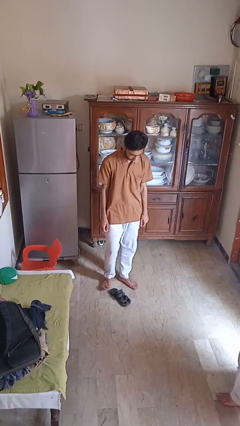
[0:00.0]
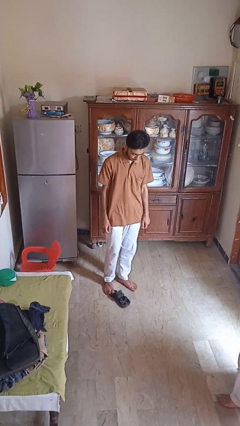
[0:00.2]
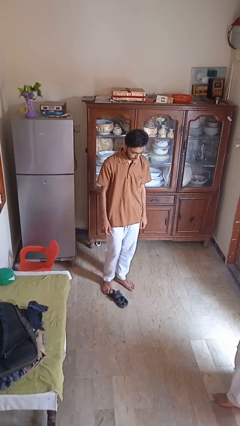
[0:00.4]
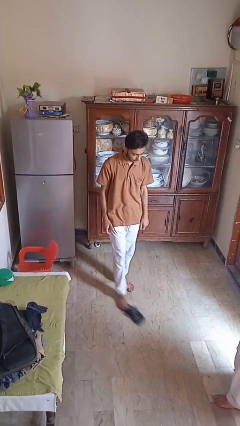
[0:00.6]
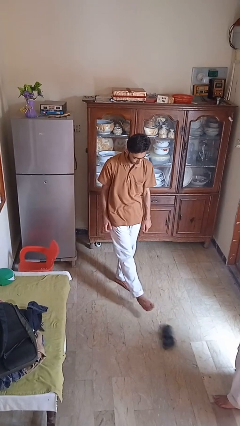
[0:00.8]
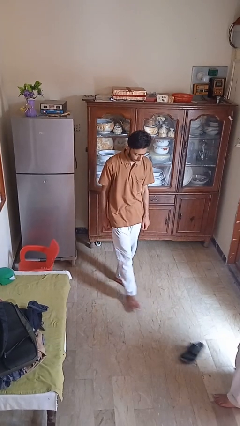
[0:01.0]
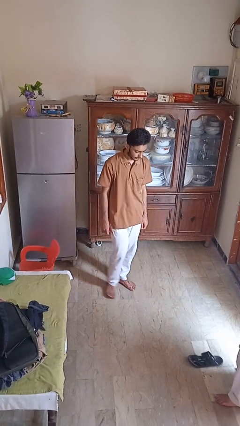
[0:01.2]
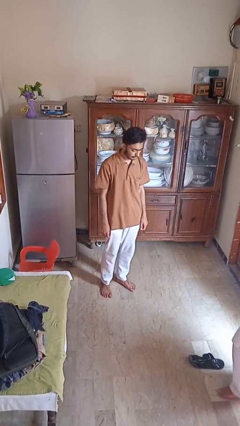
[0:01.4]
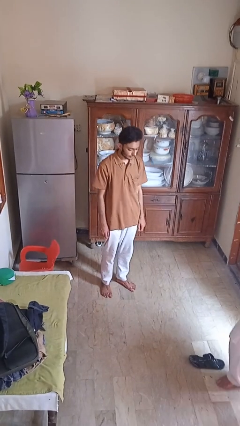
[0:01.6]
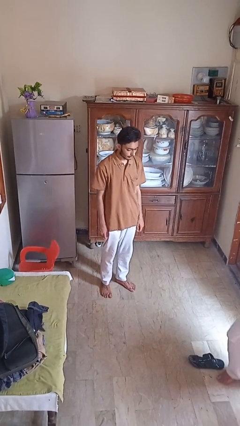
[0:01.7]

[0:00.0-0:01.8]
person kicks object to person

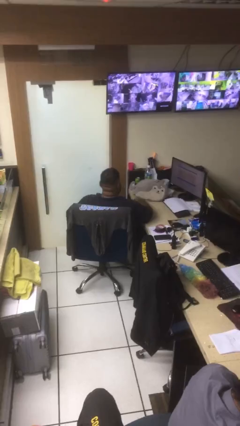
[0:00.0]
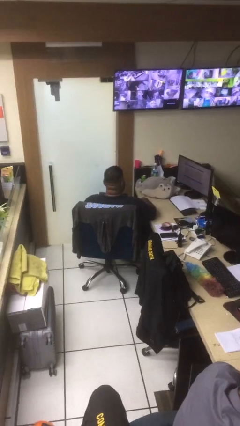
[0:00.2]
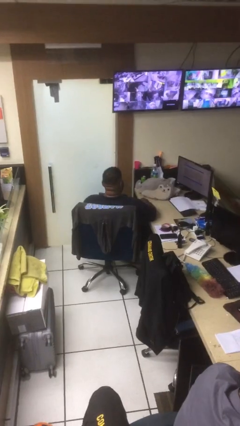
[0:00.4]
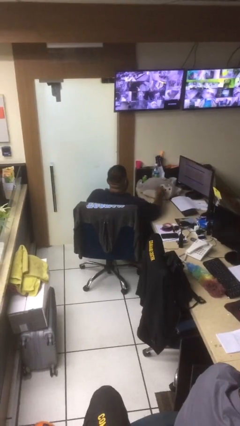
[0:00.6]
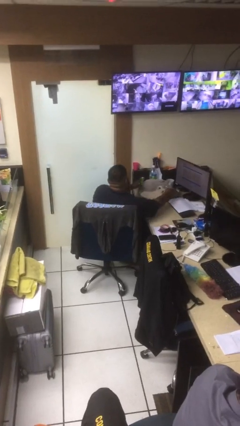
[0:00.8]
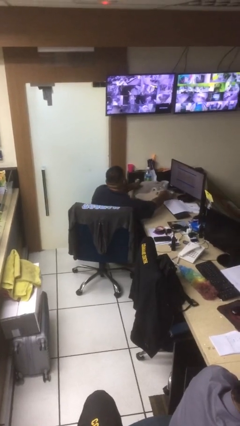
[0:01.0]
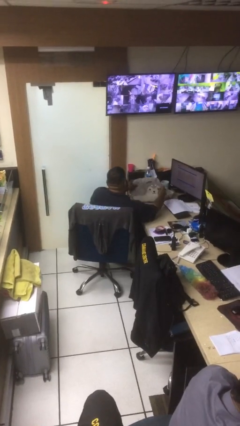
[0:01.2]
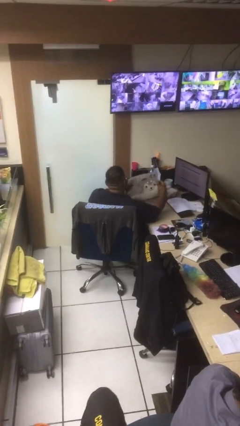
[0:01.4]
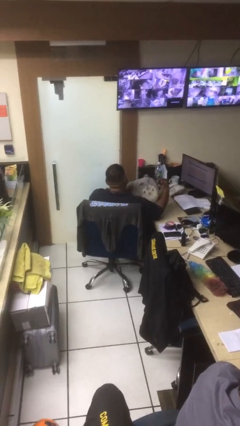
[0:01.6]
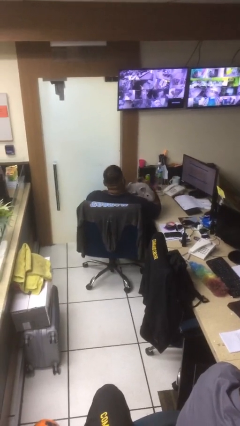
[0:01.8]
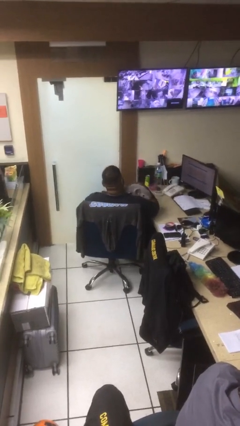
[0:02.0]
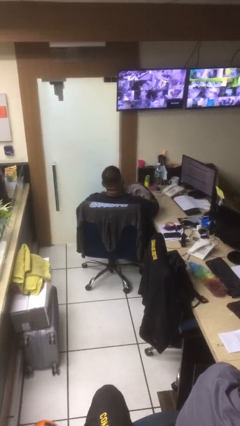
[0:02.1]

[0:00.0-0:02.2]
person hugs stuffed animal

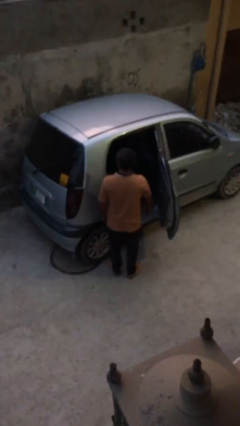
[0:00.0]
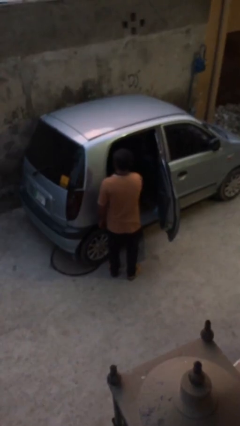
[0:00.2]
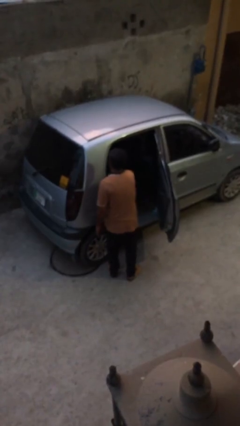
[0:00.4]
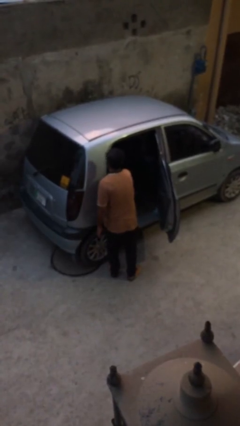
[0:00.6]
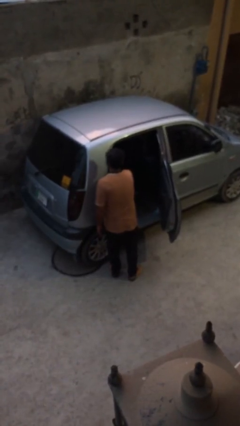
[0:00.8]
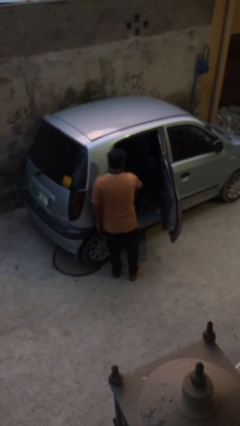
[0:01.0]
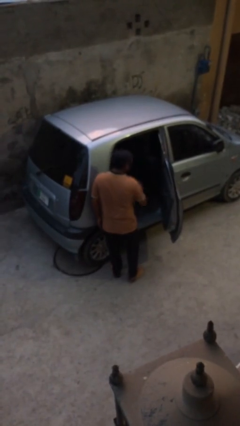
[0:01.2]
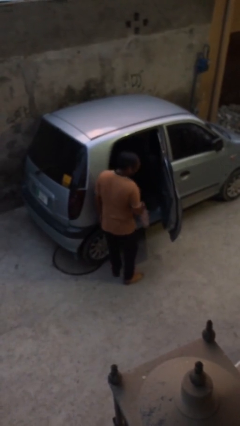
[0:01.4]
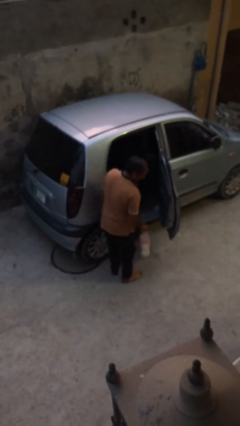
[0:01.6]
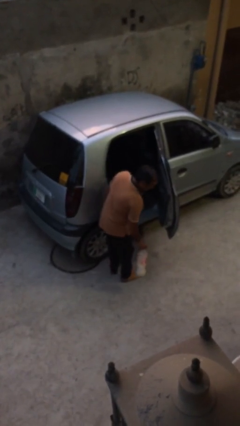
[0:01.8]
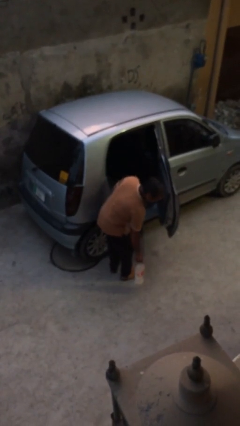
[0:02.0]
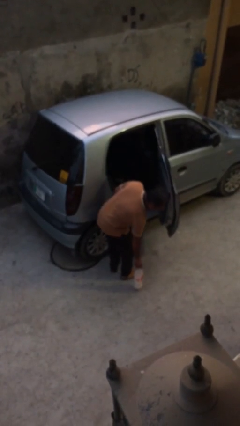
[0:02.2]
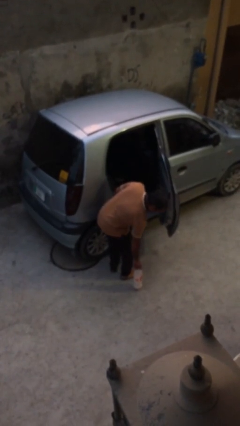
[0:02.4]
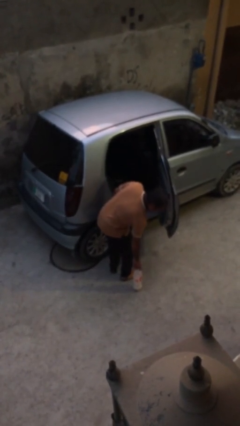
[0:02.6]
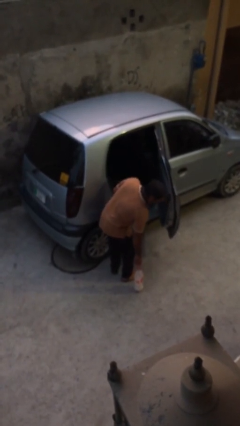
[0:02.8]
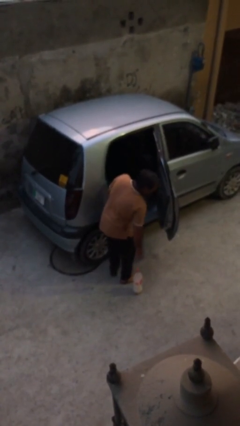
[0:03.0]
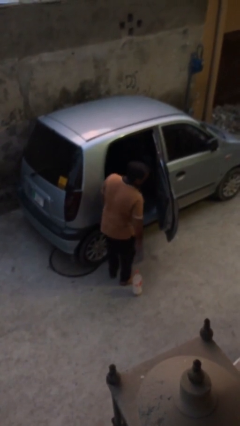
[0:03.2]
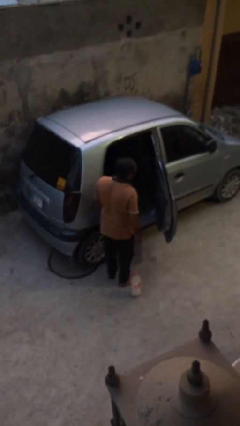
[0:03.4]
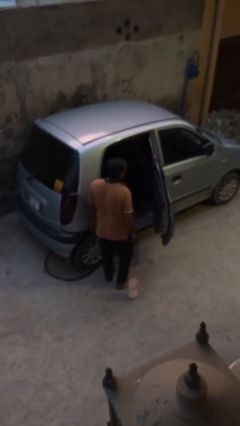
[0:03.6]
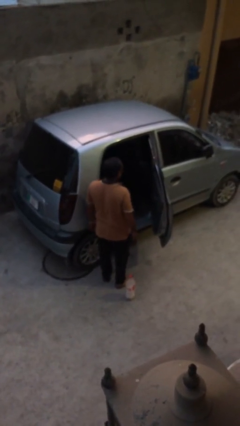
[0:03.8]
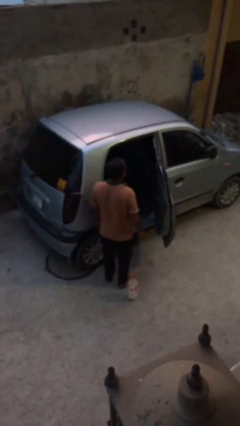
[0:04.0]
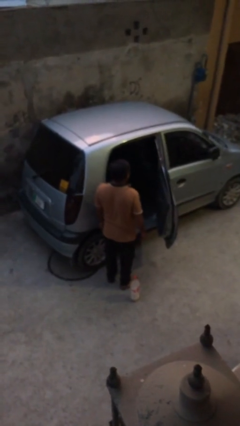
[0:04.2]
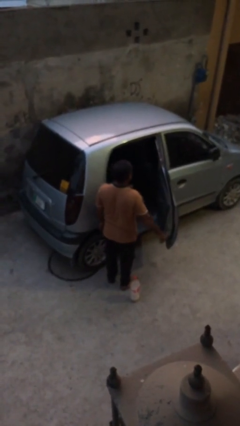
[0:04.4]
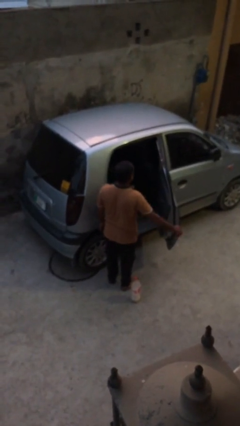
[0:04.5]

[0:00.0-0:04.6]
person unloads car

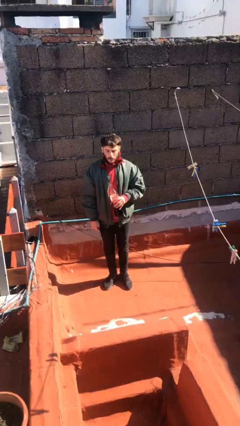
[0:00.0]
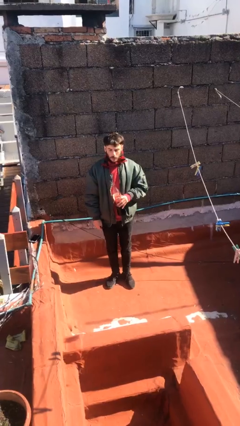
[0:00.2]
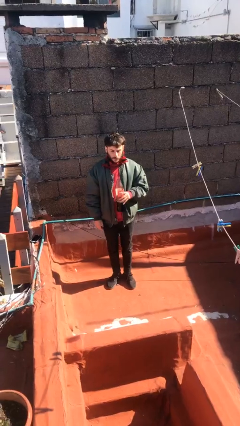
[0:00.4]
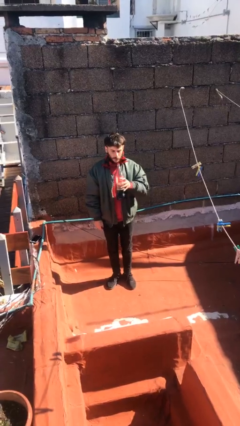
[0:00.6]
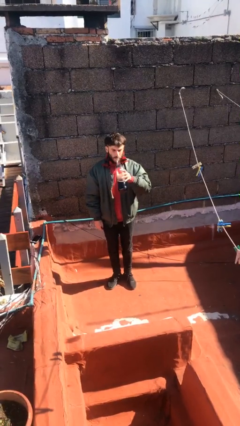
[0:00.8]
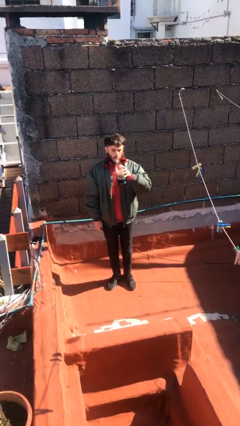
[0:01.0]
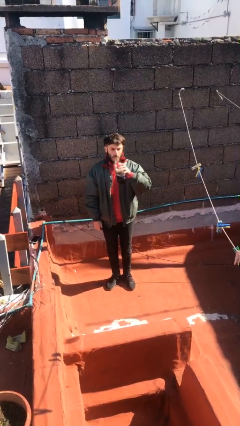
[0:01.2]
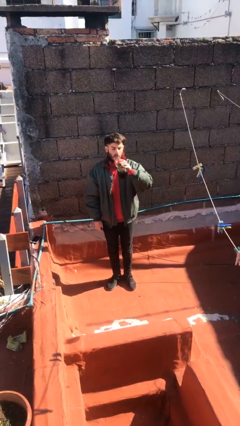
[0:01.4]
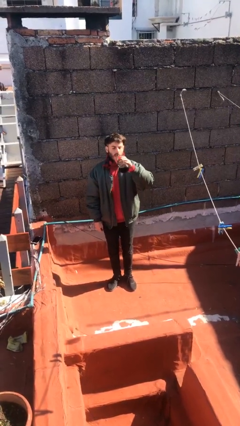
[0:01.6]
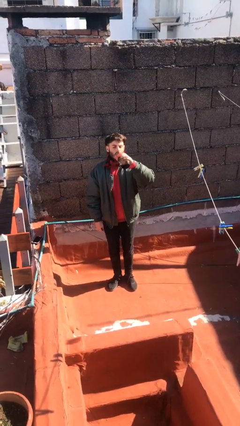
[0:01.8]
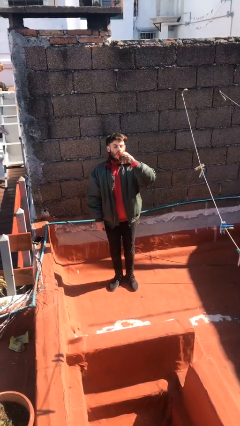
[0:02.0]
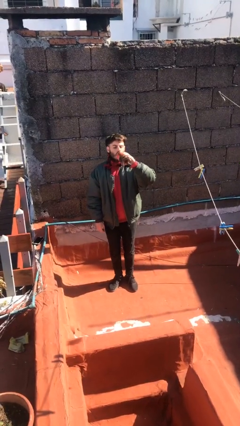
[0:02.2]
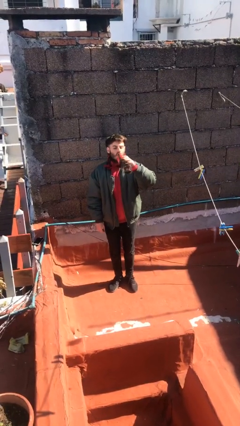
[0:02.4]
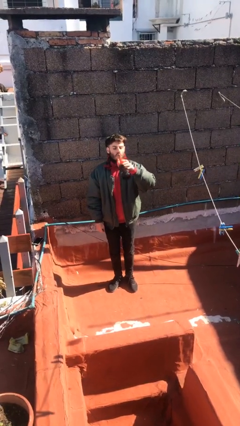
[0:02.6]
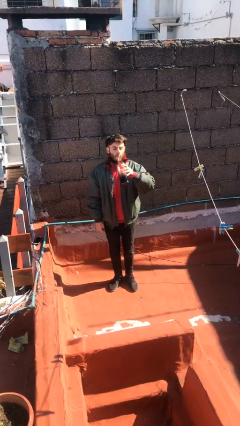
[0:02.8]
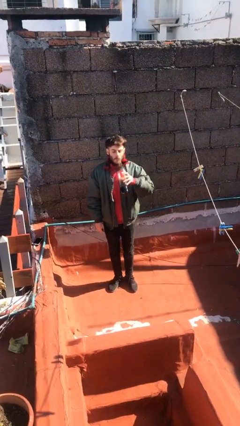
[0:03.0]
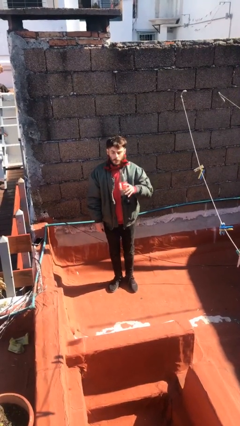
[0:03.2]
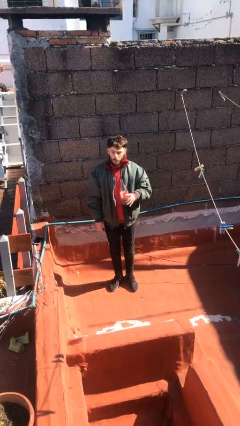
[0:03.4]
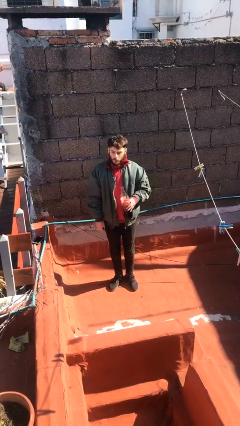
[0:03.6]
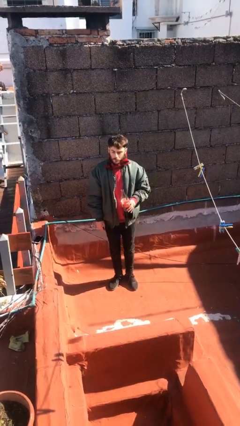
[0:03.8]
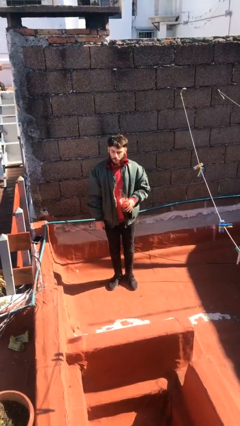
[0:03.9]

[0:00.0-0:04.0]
person drinks from bottle

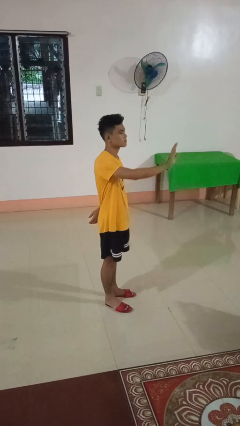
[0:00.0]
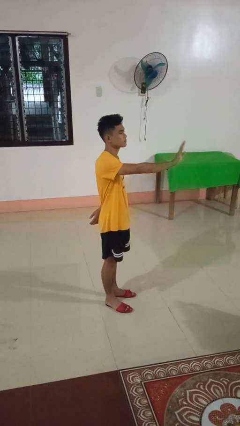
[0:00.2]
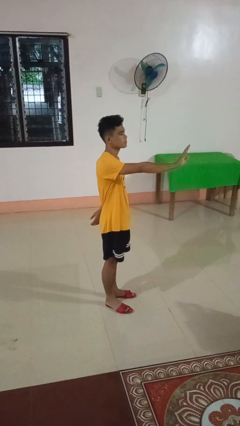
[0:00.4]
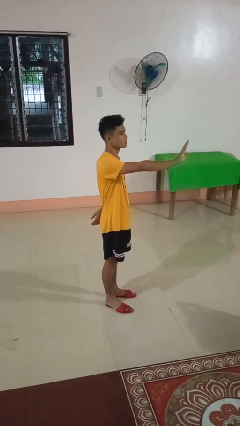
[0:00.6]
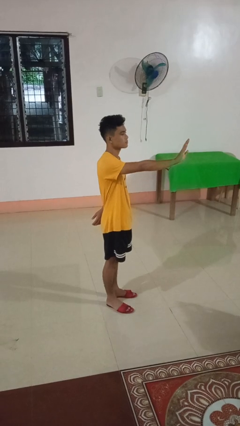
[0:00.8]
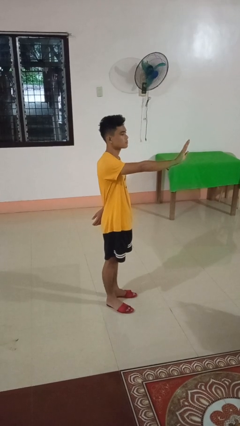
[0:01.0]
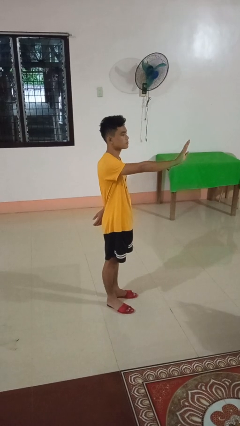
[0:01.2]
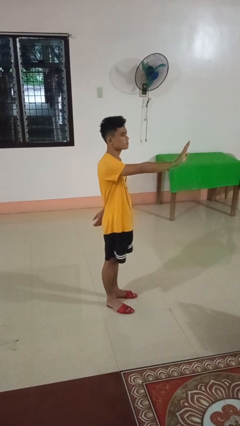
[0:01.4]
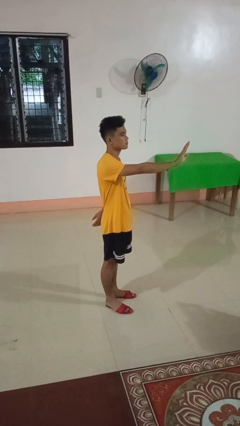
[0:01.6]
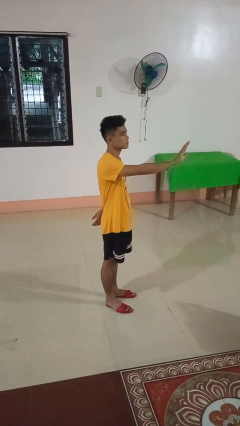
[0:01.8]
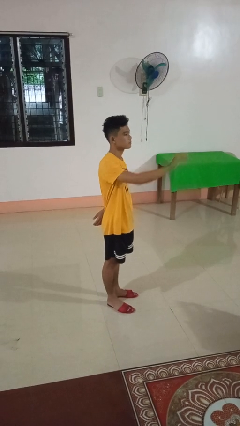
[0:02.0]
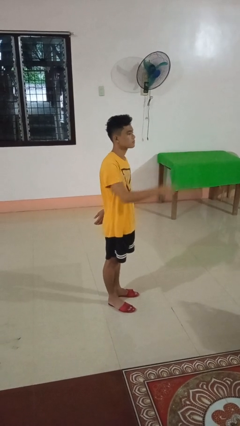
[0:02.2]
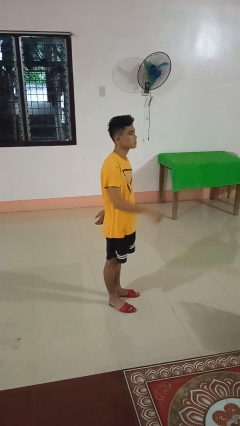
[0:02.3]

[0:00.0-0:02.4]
person gestures stop

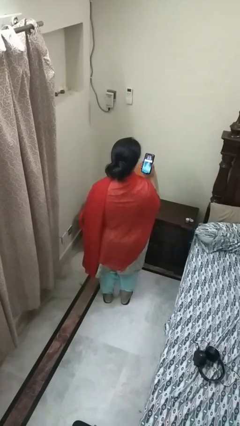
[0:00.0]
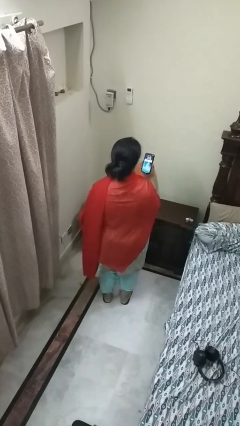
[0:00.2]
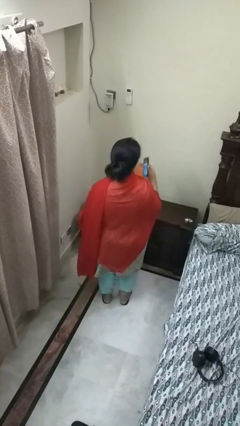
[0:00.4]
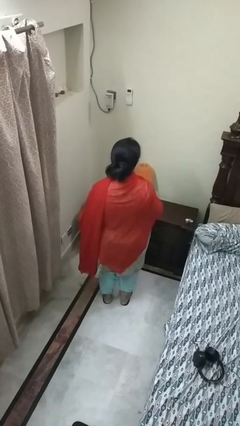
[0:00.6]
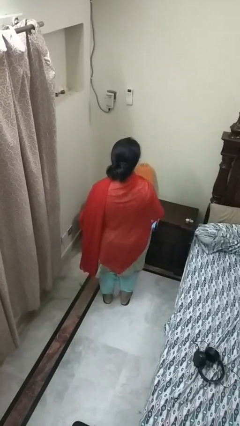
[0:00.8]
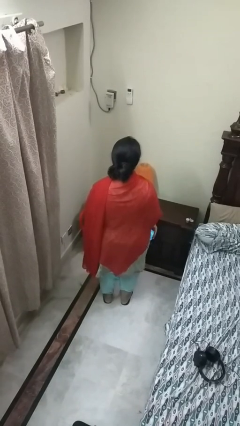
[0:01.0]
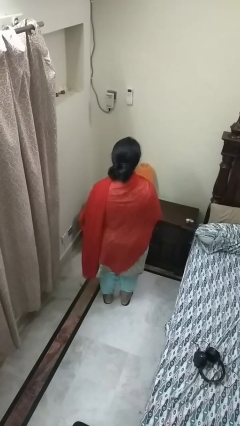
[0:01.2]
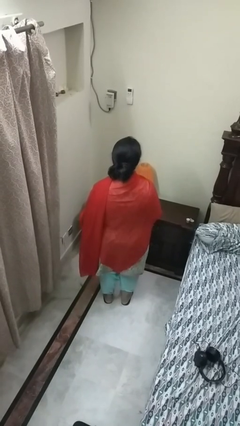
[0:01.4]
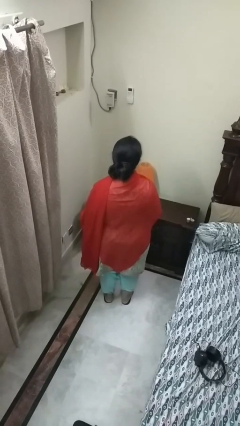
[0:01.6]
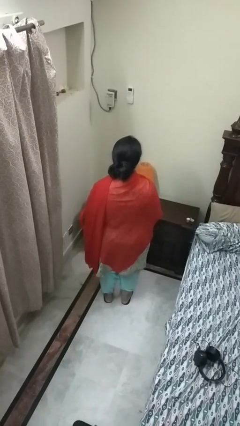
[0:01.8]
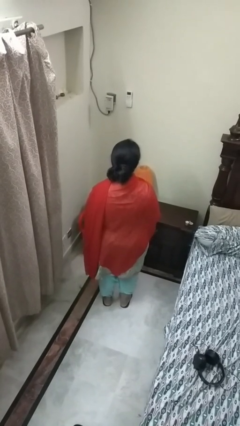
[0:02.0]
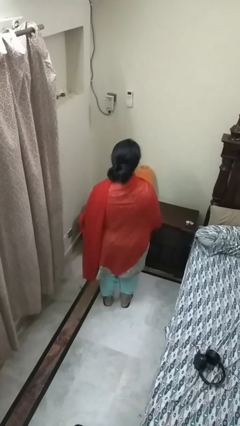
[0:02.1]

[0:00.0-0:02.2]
person puts phone into pocket
